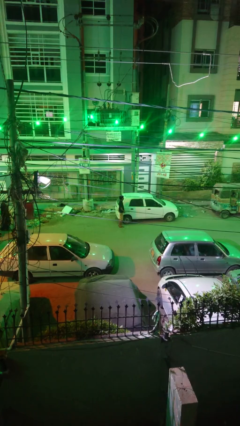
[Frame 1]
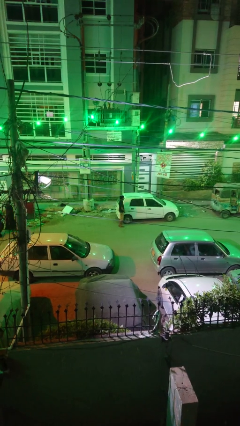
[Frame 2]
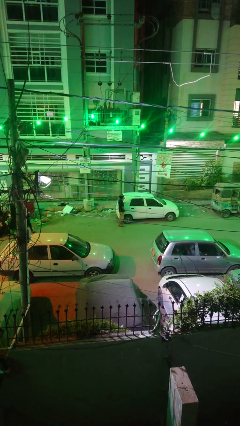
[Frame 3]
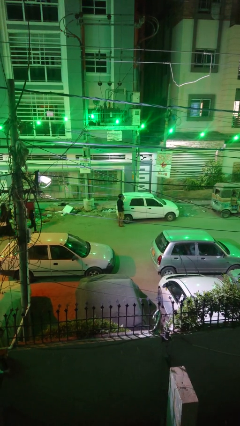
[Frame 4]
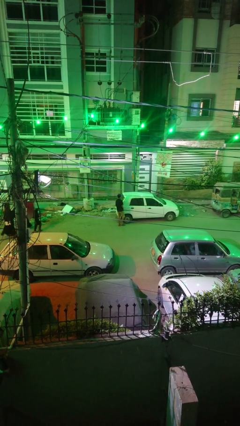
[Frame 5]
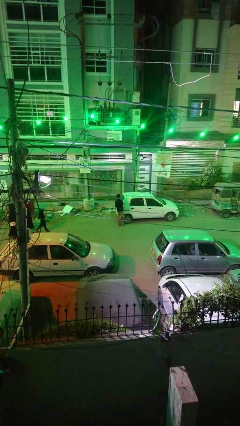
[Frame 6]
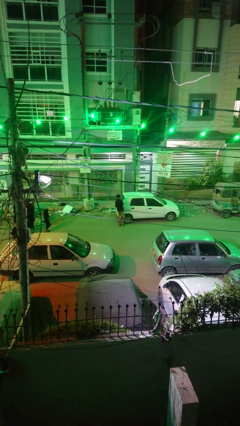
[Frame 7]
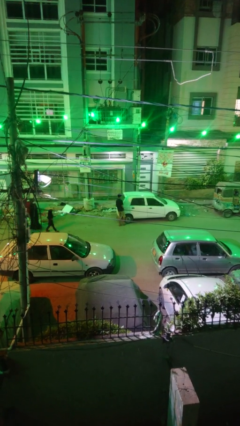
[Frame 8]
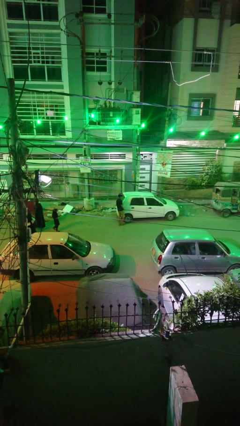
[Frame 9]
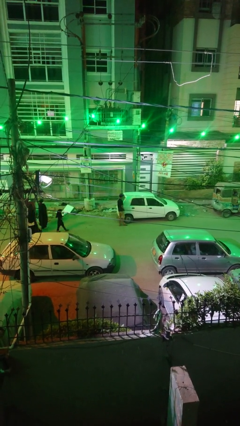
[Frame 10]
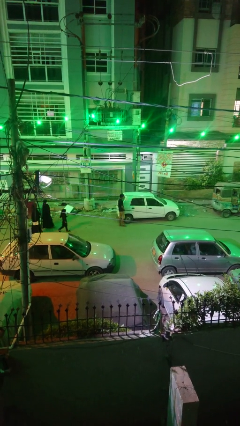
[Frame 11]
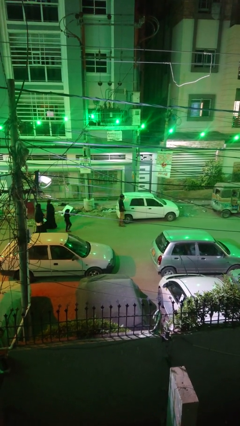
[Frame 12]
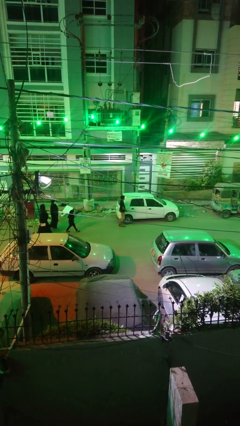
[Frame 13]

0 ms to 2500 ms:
person kicks car tires

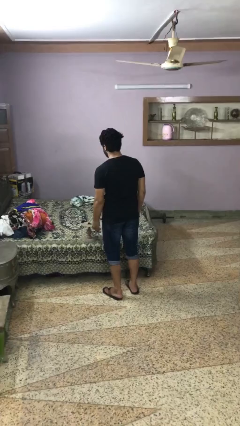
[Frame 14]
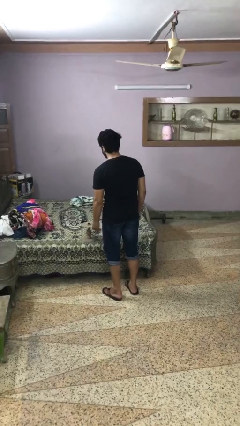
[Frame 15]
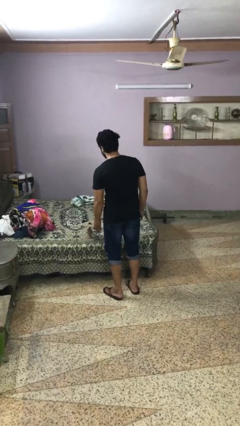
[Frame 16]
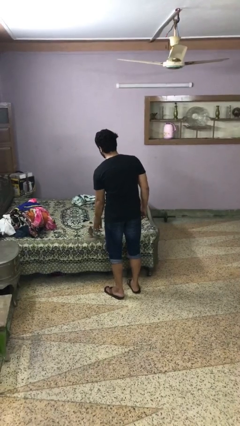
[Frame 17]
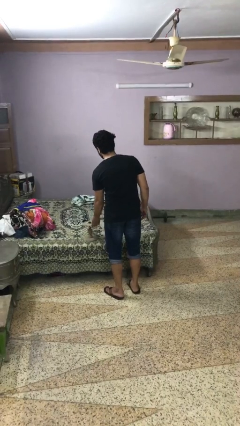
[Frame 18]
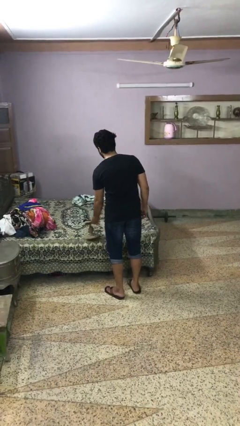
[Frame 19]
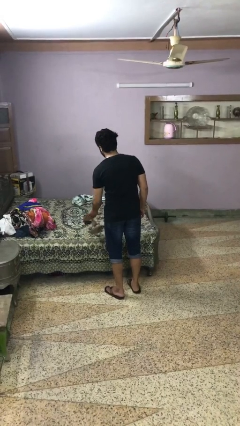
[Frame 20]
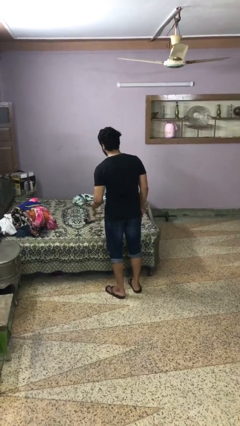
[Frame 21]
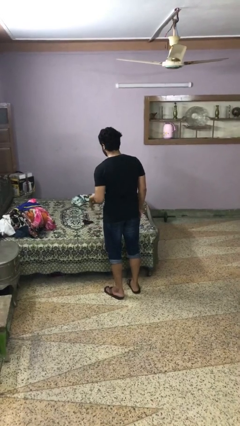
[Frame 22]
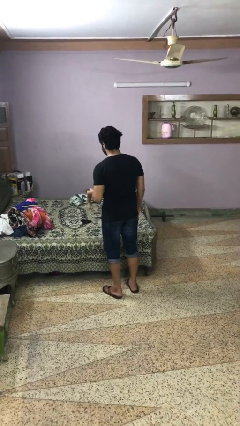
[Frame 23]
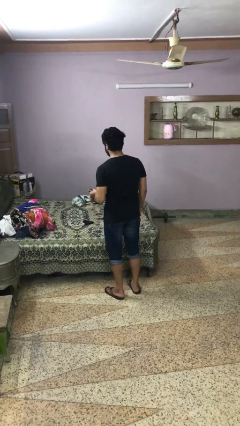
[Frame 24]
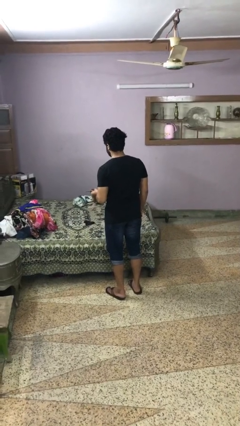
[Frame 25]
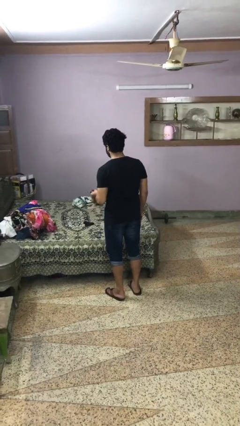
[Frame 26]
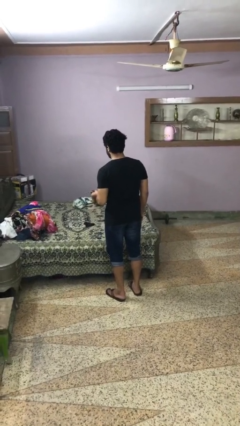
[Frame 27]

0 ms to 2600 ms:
person picks up object from bed

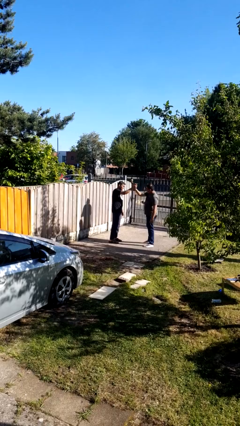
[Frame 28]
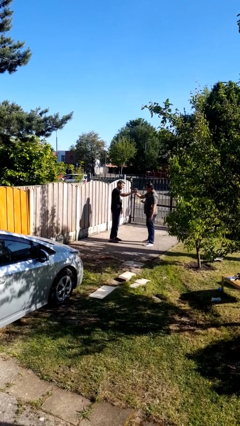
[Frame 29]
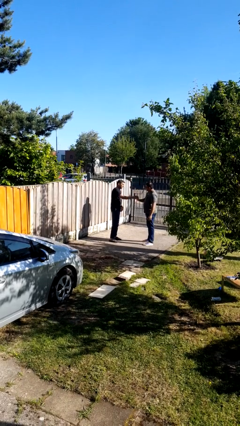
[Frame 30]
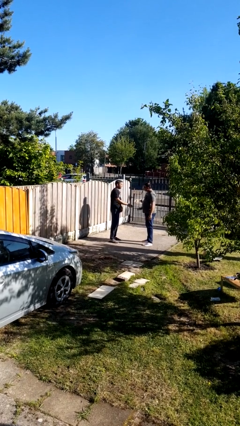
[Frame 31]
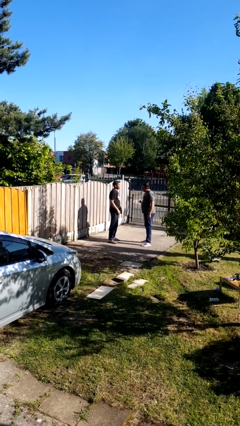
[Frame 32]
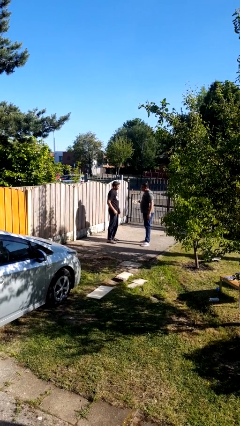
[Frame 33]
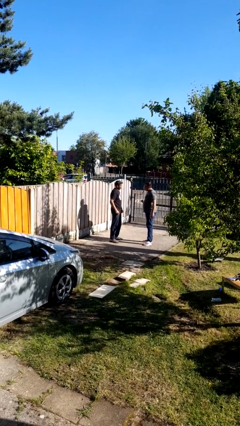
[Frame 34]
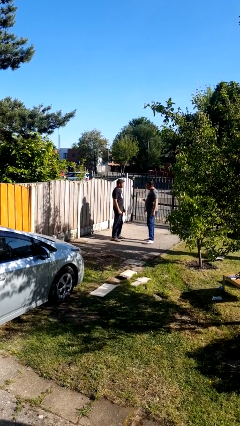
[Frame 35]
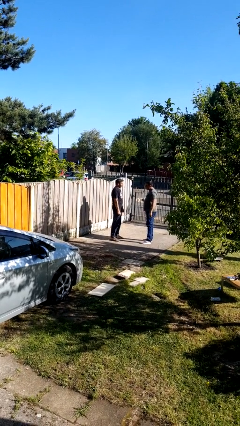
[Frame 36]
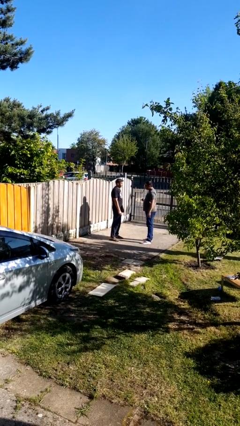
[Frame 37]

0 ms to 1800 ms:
person highfives hand

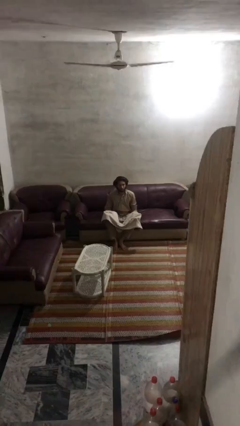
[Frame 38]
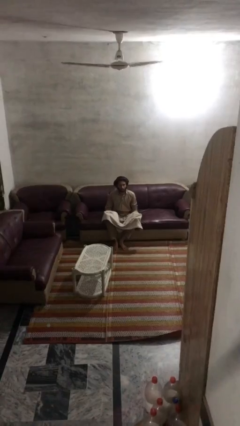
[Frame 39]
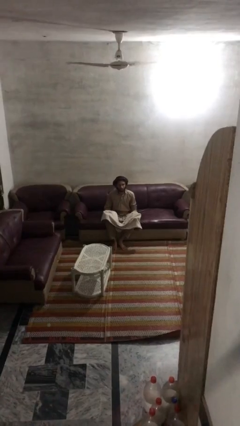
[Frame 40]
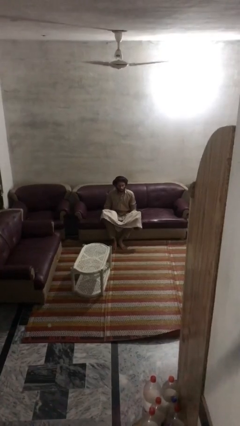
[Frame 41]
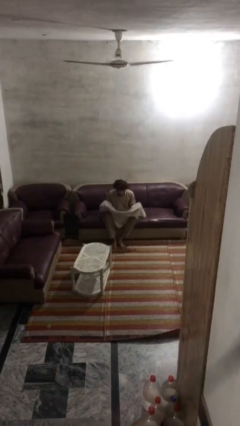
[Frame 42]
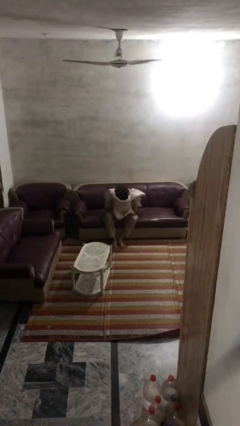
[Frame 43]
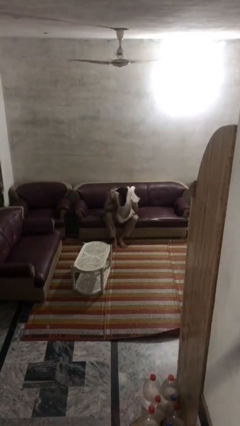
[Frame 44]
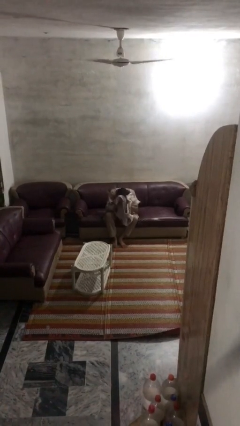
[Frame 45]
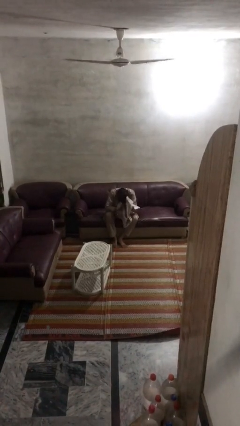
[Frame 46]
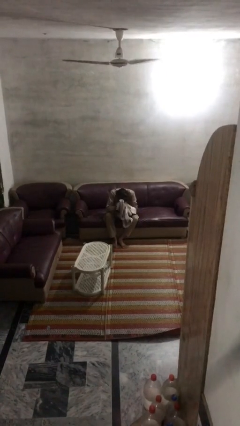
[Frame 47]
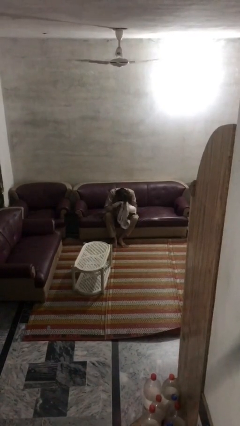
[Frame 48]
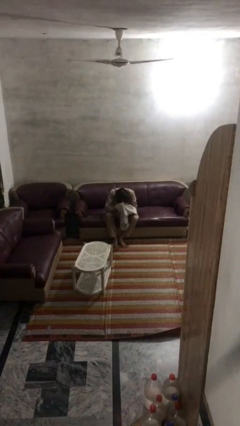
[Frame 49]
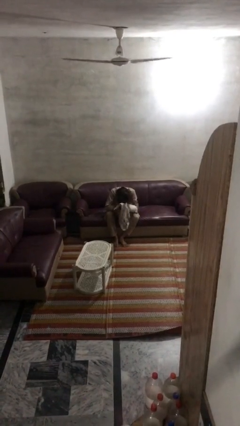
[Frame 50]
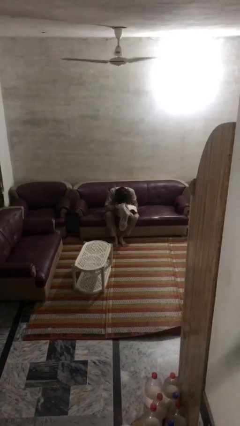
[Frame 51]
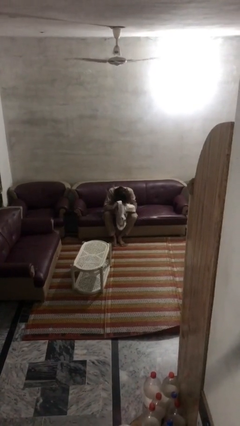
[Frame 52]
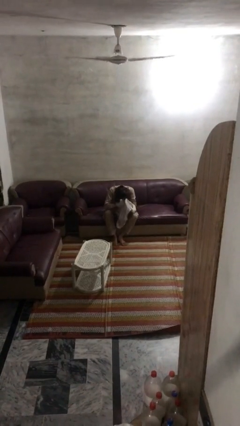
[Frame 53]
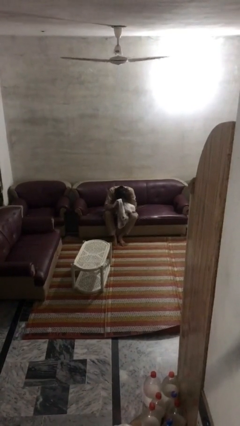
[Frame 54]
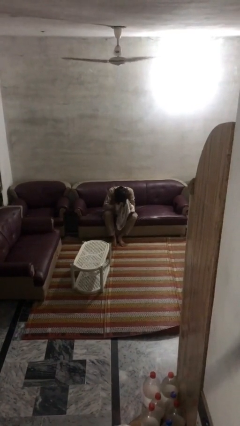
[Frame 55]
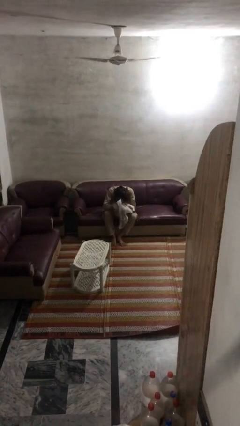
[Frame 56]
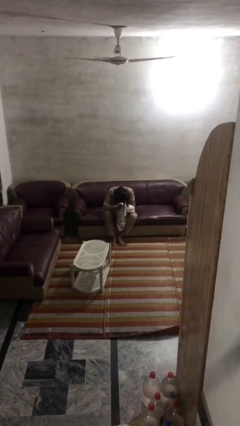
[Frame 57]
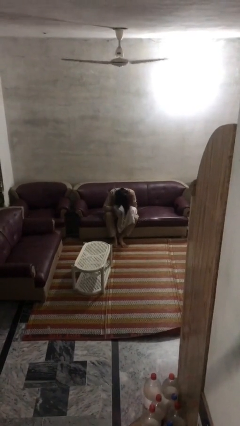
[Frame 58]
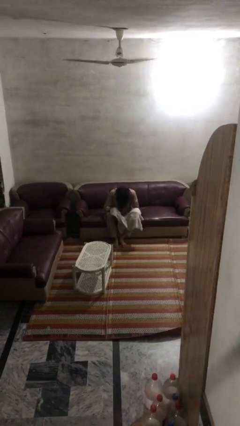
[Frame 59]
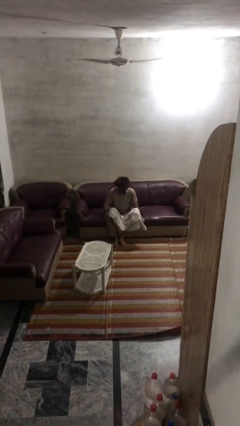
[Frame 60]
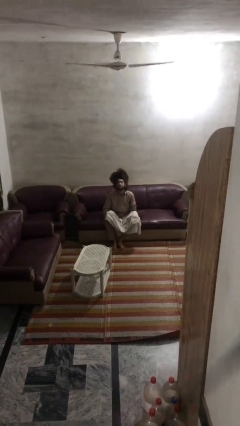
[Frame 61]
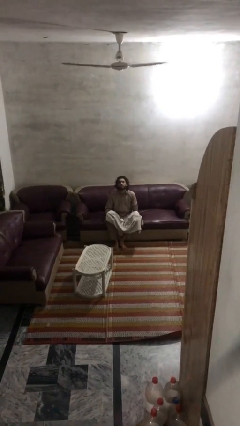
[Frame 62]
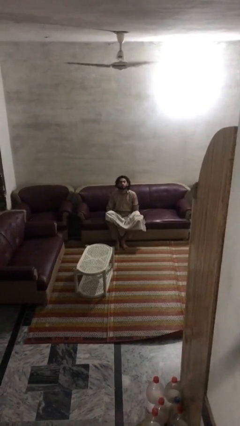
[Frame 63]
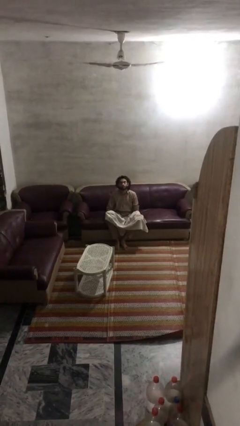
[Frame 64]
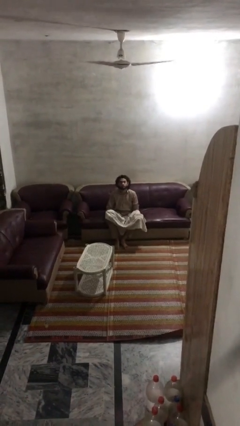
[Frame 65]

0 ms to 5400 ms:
person dries hair with towel

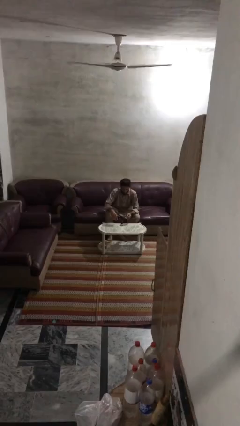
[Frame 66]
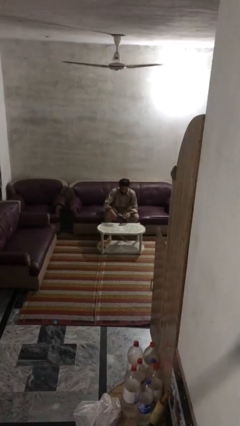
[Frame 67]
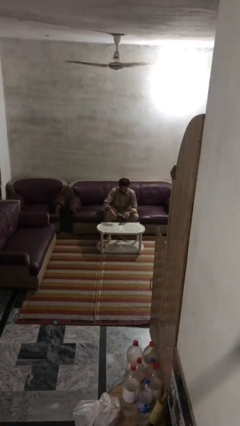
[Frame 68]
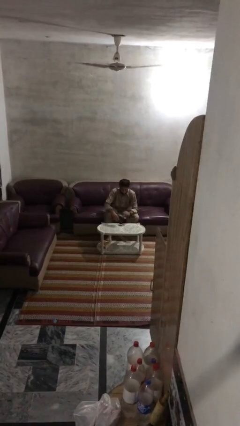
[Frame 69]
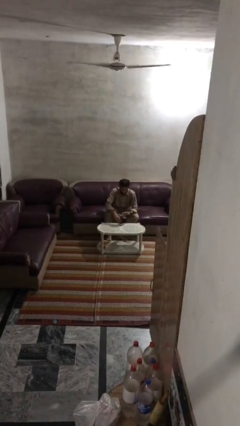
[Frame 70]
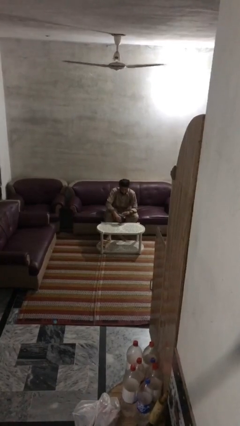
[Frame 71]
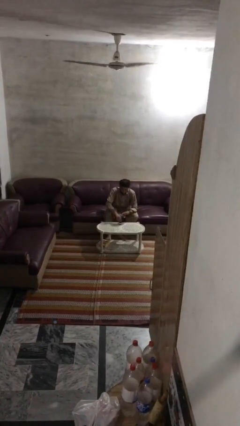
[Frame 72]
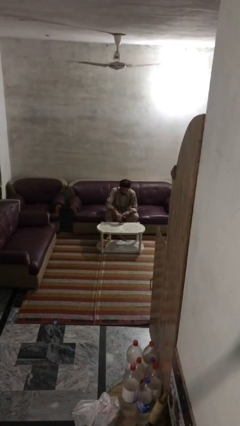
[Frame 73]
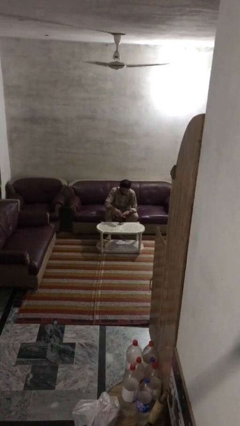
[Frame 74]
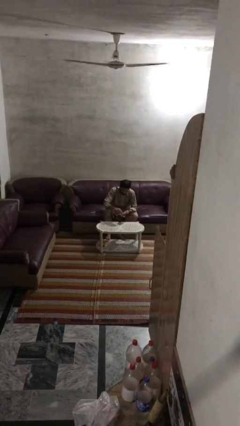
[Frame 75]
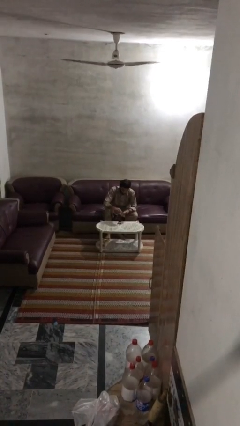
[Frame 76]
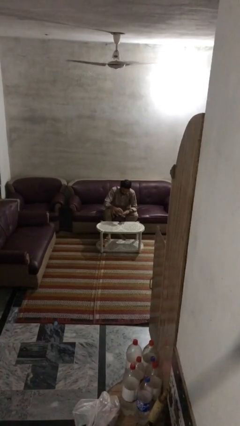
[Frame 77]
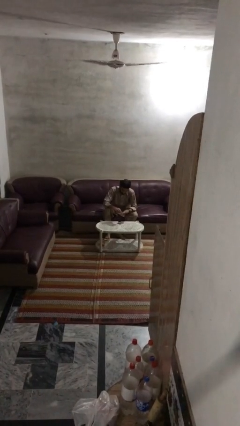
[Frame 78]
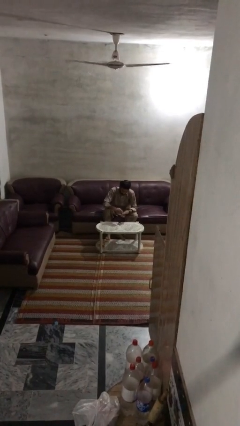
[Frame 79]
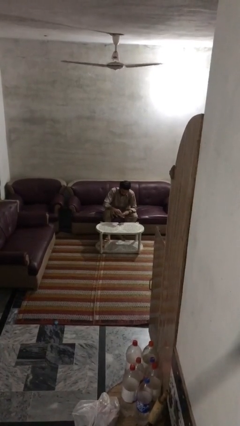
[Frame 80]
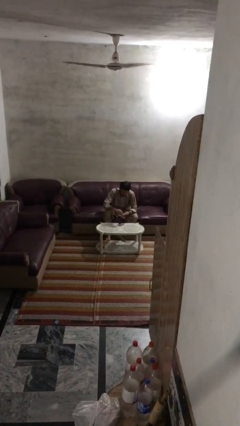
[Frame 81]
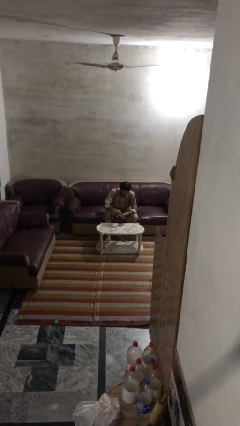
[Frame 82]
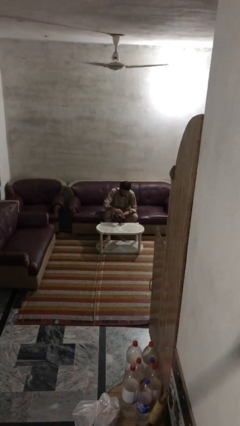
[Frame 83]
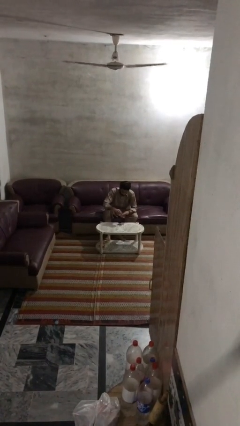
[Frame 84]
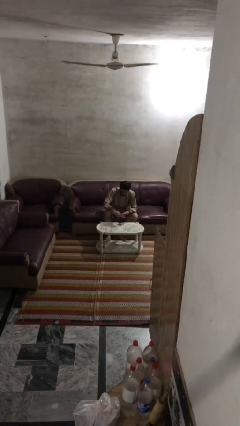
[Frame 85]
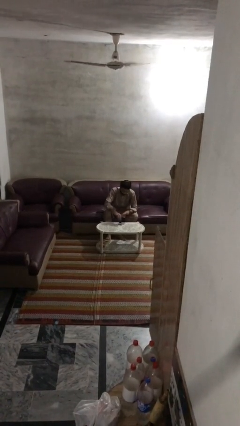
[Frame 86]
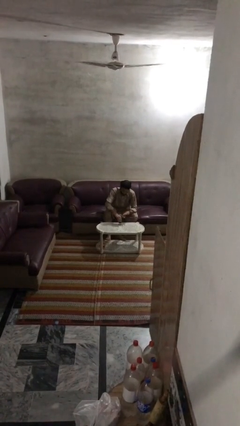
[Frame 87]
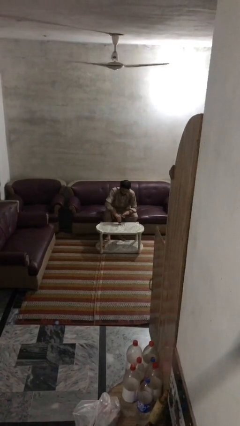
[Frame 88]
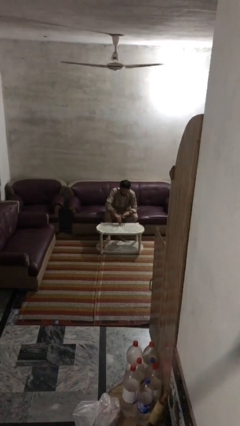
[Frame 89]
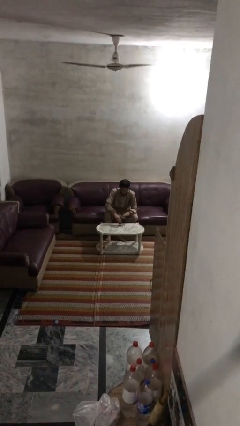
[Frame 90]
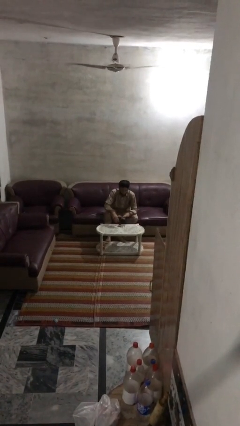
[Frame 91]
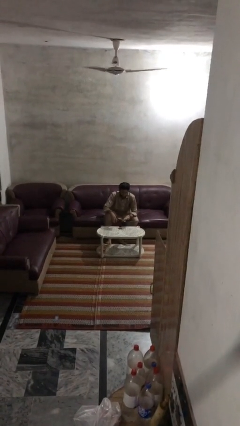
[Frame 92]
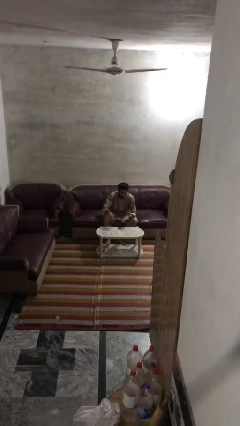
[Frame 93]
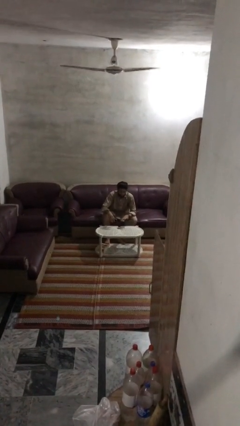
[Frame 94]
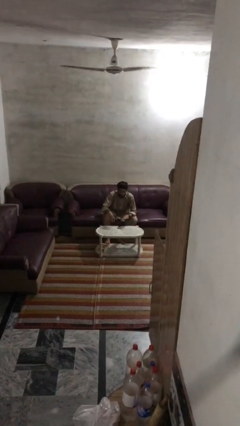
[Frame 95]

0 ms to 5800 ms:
person paints fingernails
